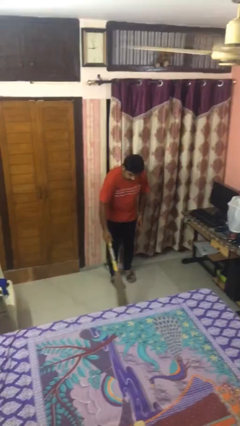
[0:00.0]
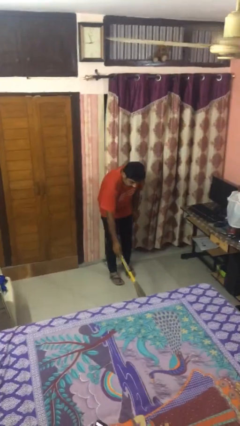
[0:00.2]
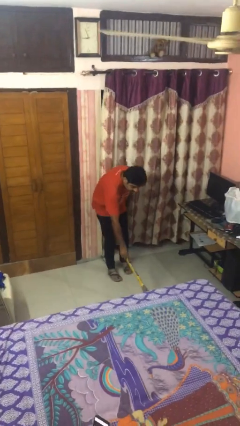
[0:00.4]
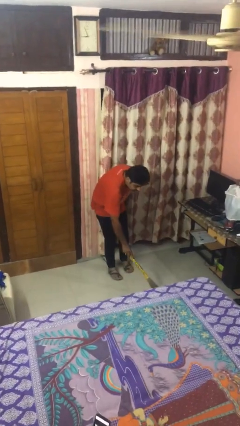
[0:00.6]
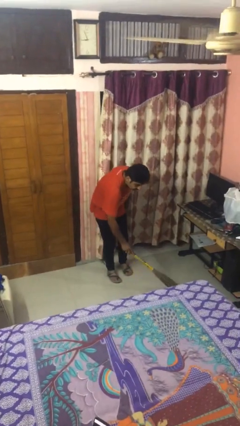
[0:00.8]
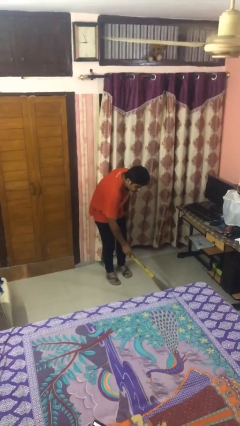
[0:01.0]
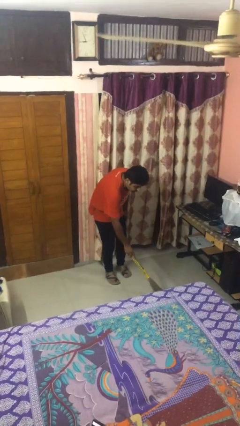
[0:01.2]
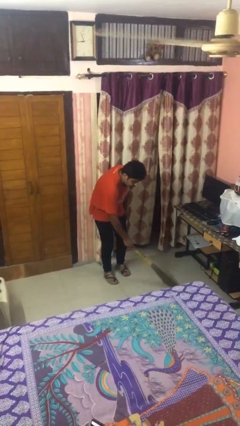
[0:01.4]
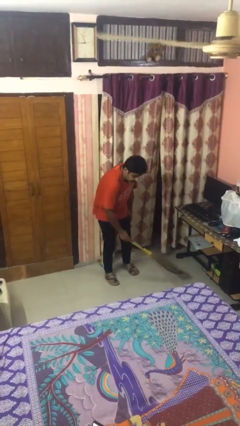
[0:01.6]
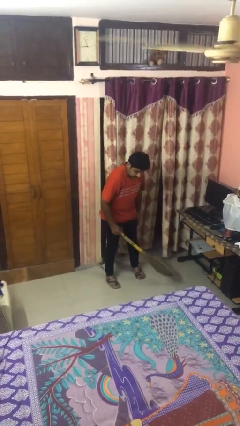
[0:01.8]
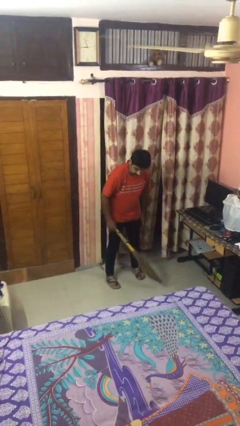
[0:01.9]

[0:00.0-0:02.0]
person sweeps floor

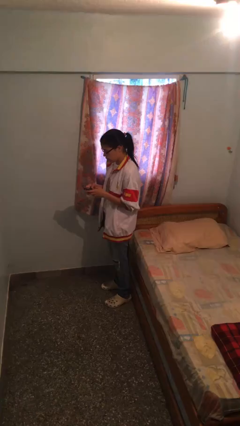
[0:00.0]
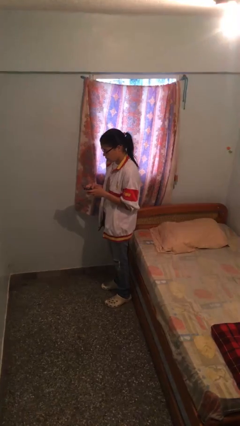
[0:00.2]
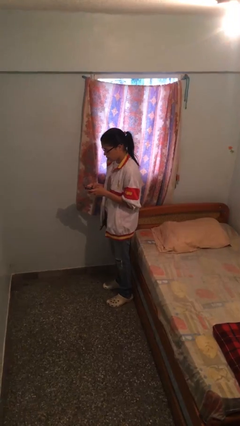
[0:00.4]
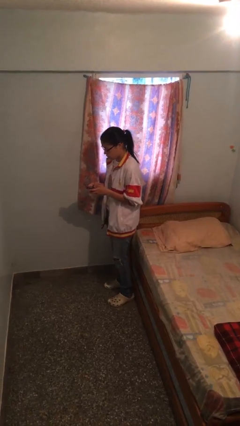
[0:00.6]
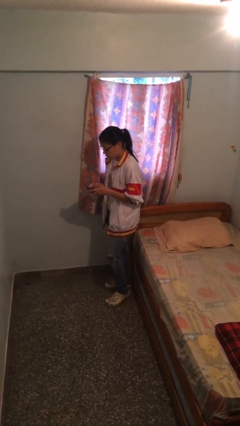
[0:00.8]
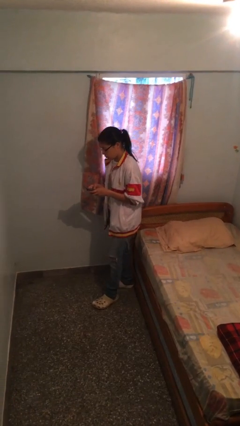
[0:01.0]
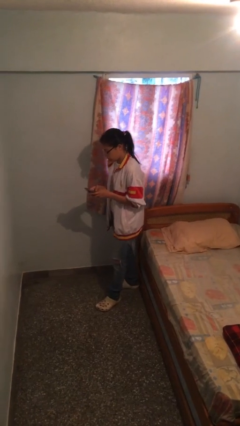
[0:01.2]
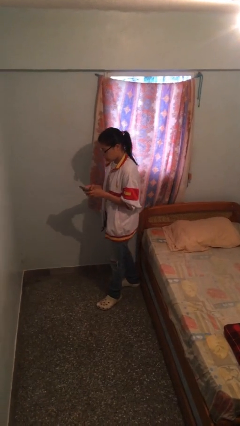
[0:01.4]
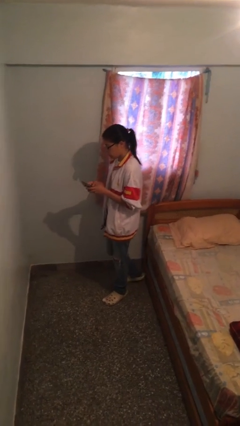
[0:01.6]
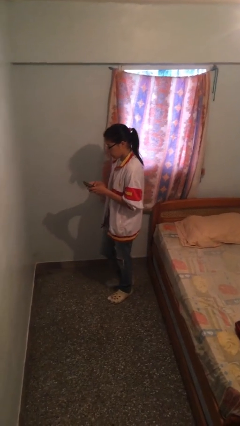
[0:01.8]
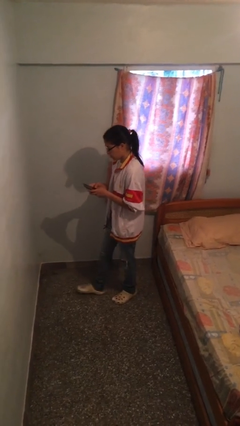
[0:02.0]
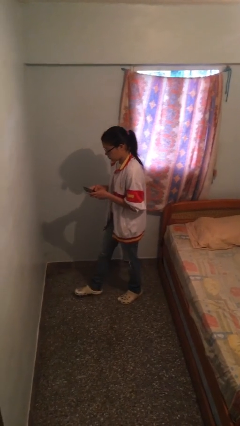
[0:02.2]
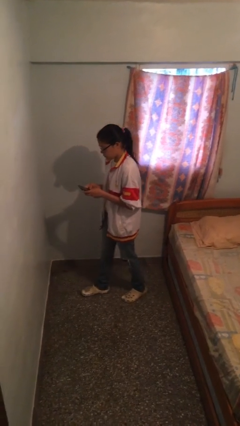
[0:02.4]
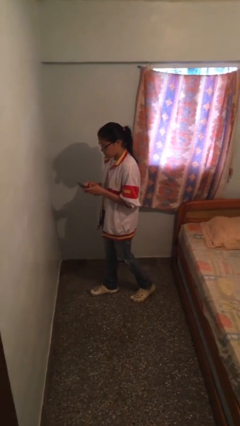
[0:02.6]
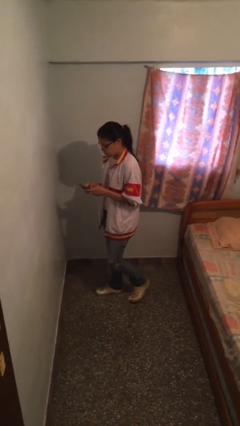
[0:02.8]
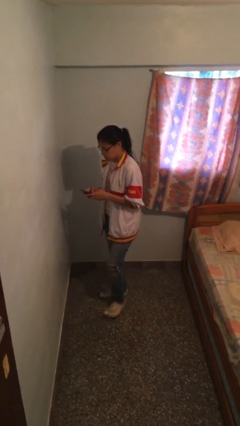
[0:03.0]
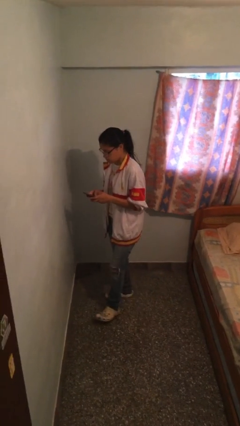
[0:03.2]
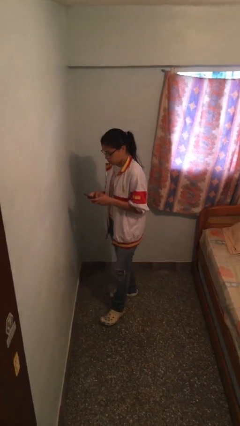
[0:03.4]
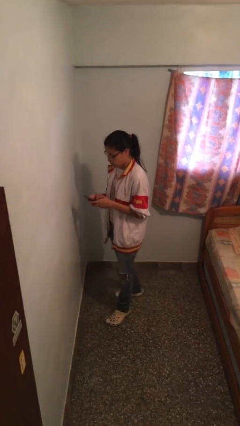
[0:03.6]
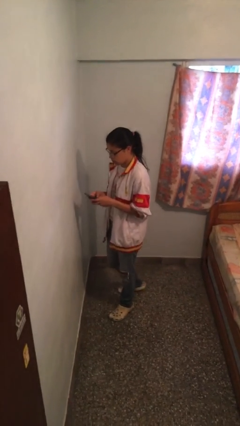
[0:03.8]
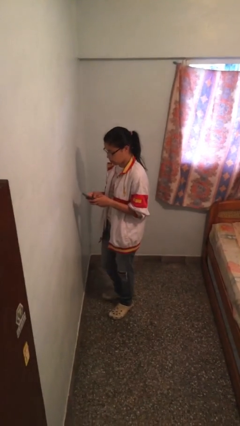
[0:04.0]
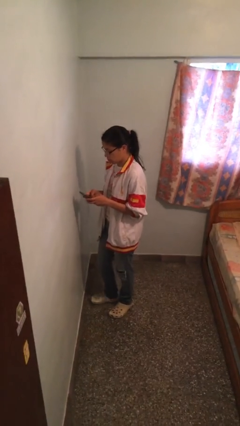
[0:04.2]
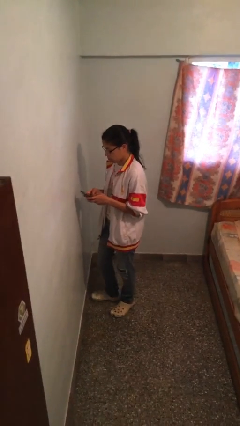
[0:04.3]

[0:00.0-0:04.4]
person texts on phone

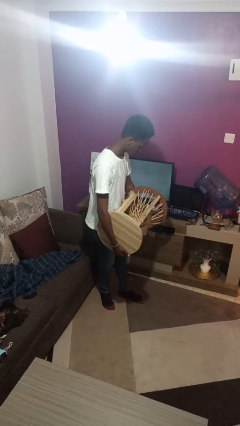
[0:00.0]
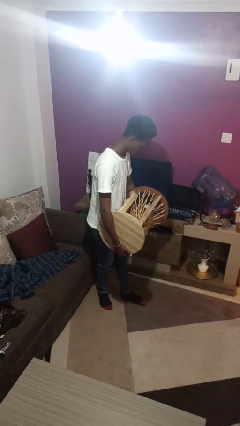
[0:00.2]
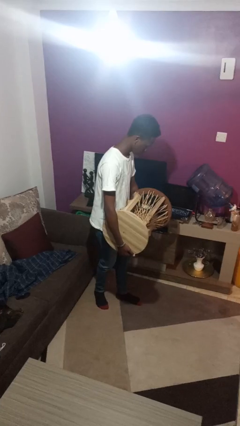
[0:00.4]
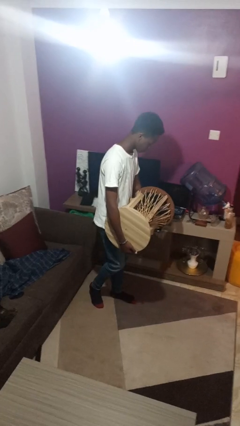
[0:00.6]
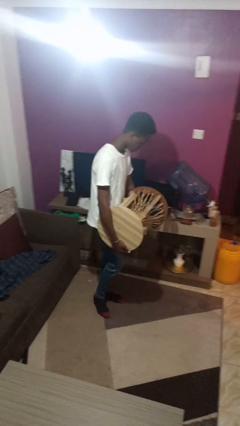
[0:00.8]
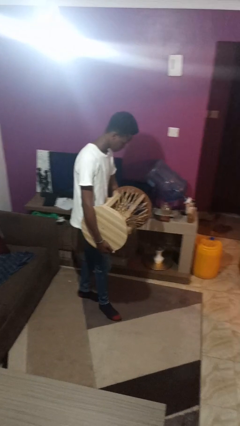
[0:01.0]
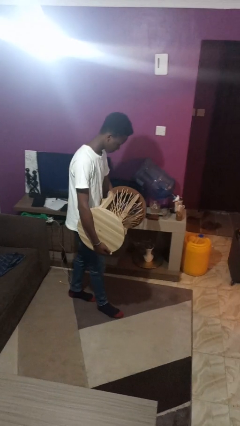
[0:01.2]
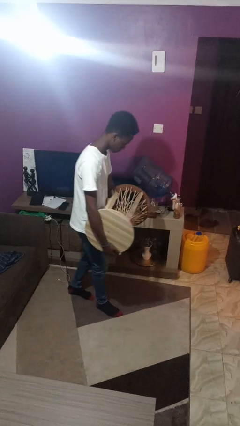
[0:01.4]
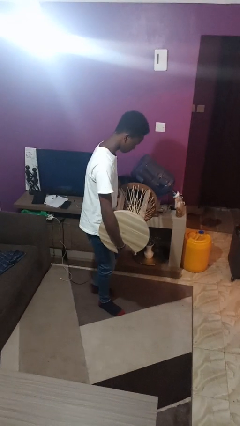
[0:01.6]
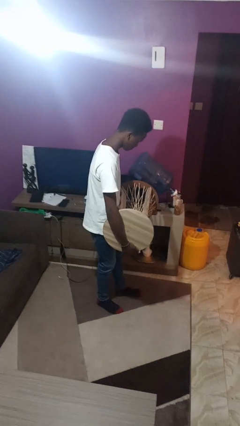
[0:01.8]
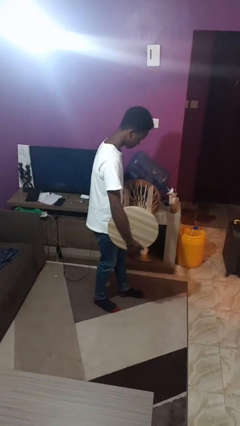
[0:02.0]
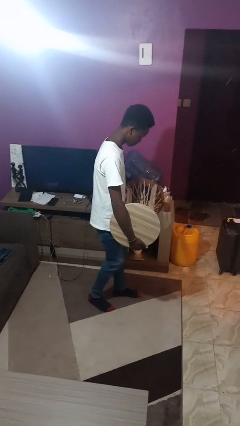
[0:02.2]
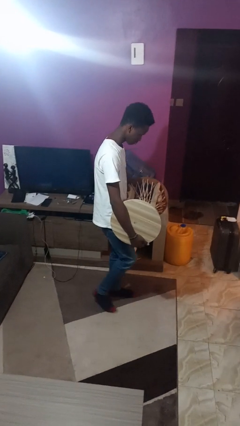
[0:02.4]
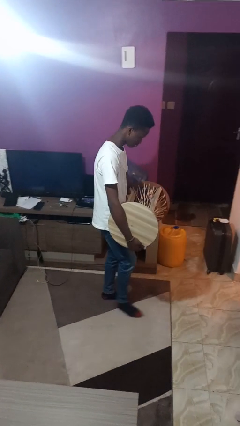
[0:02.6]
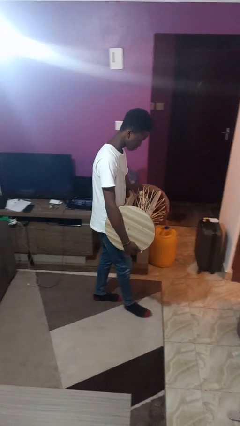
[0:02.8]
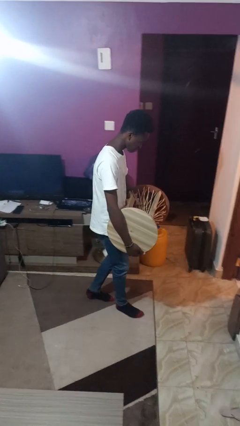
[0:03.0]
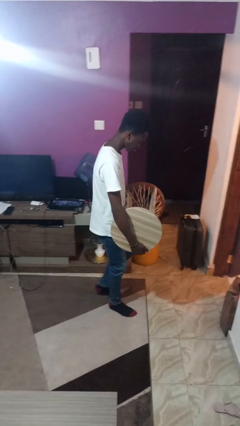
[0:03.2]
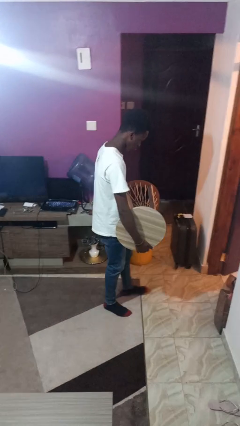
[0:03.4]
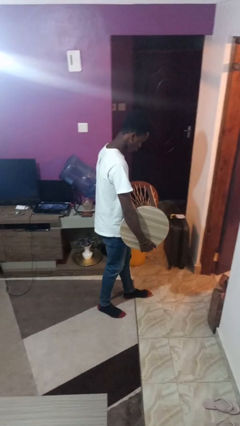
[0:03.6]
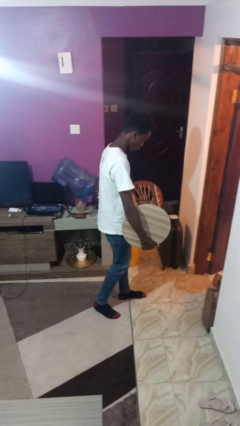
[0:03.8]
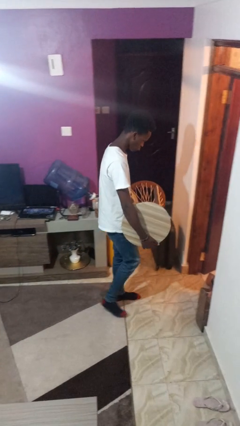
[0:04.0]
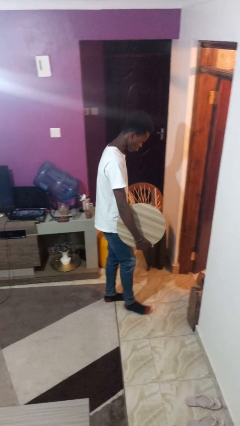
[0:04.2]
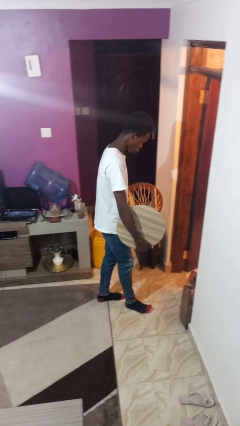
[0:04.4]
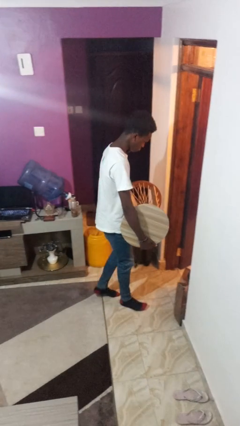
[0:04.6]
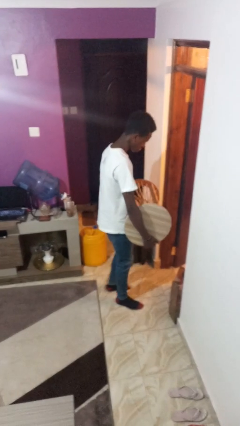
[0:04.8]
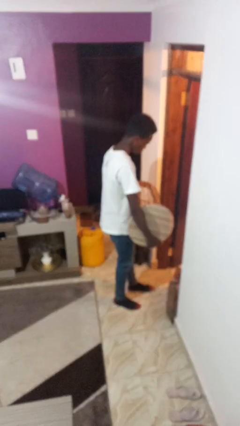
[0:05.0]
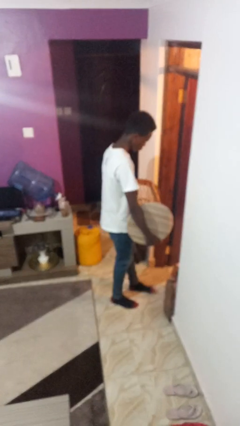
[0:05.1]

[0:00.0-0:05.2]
person carries furniture

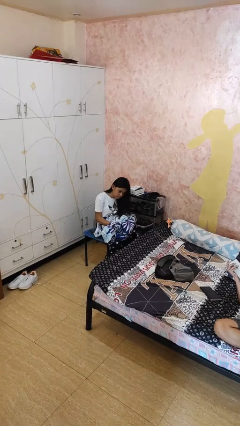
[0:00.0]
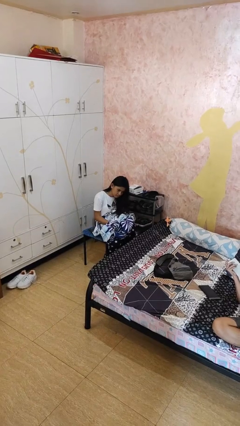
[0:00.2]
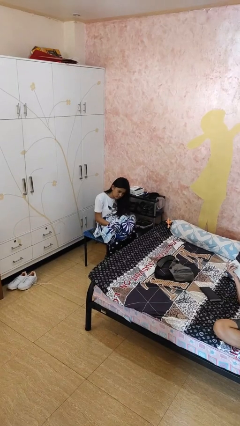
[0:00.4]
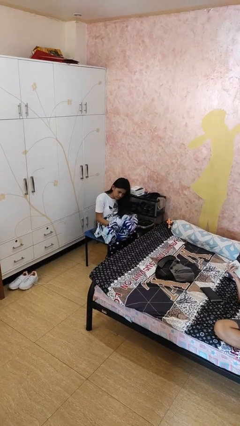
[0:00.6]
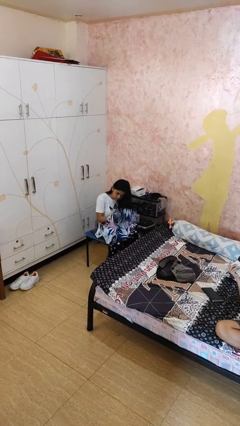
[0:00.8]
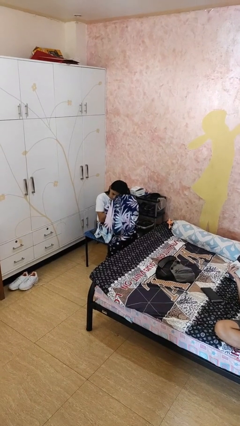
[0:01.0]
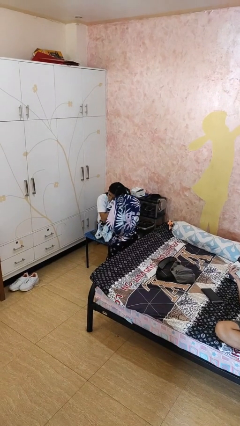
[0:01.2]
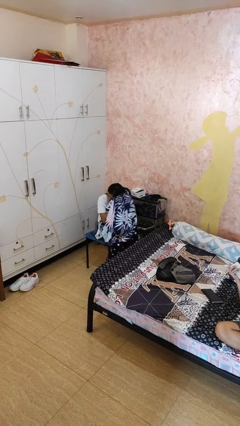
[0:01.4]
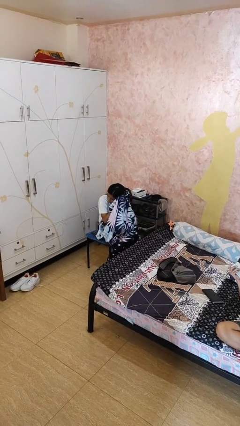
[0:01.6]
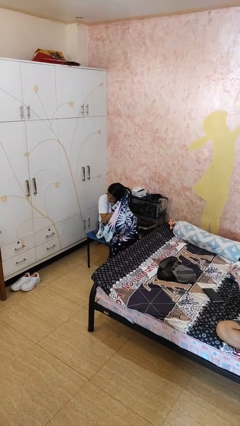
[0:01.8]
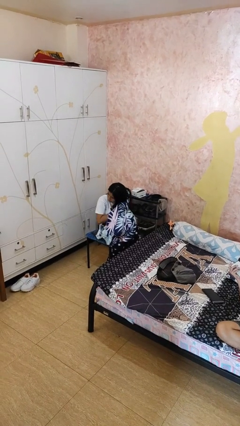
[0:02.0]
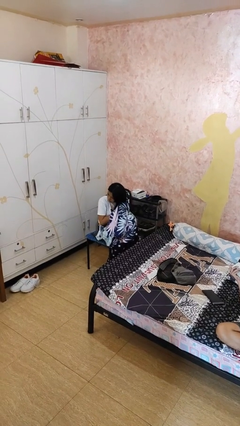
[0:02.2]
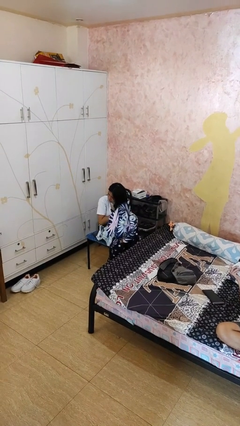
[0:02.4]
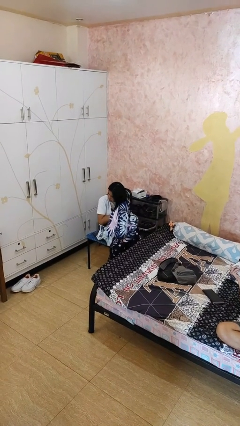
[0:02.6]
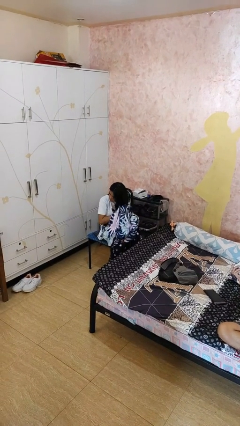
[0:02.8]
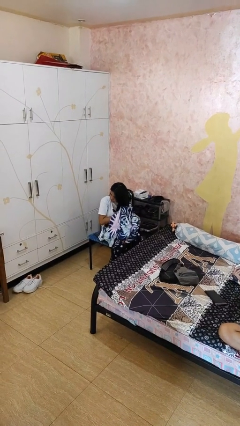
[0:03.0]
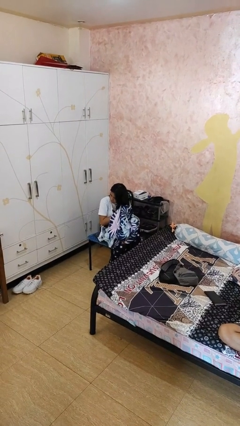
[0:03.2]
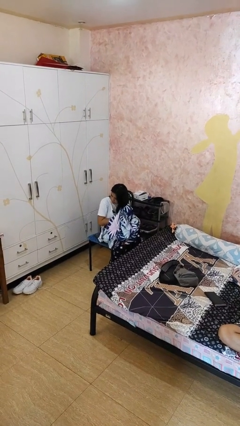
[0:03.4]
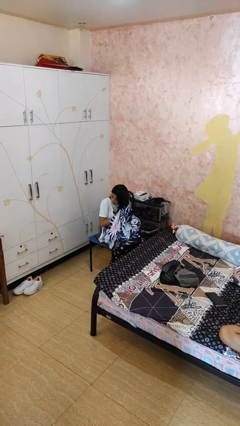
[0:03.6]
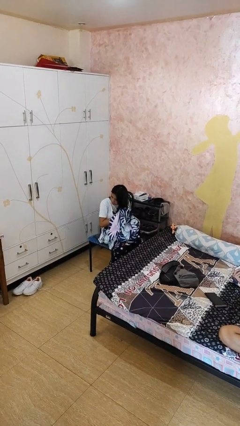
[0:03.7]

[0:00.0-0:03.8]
person dries hair with towel

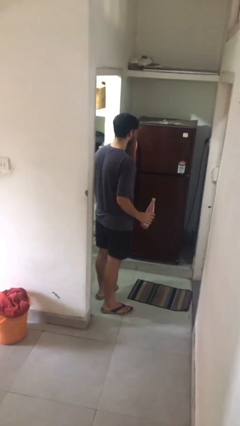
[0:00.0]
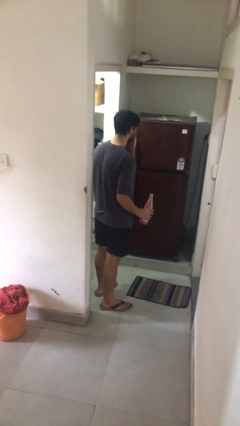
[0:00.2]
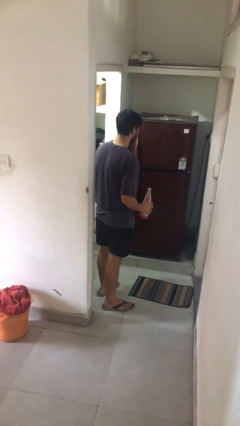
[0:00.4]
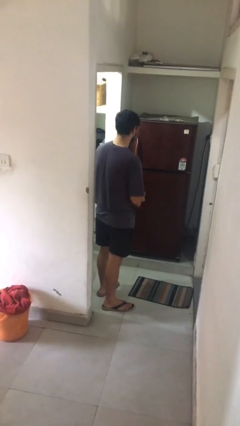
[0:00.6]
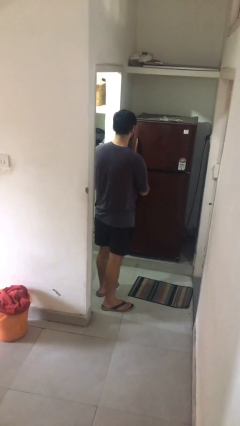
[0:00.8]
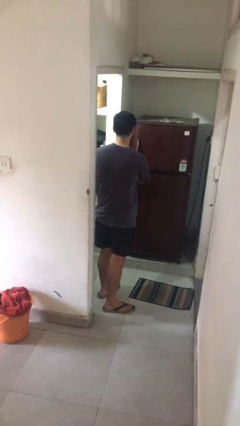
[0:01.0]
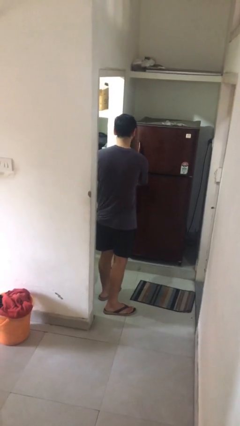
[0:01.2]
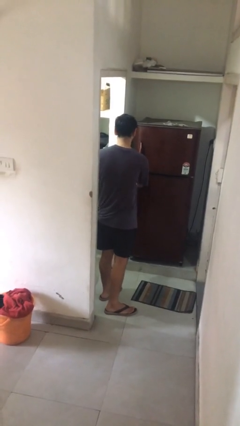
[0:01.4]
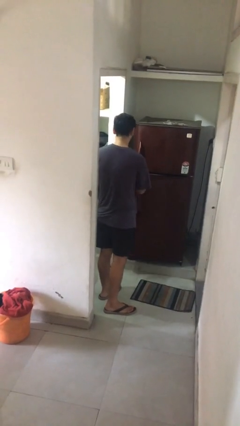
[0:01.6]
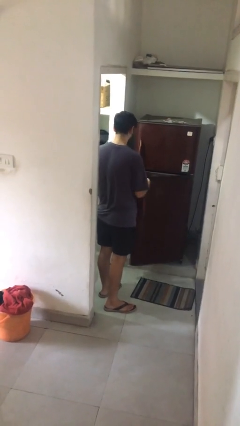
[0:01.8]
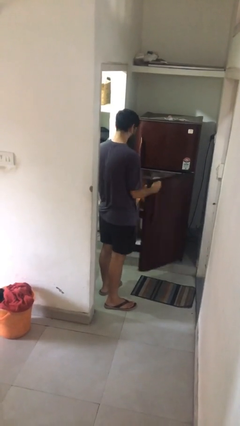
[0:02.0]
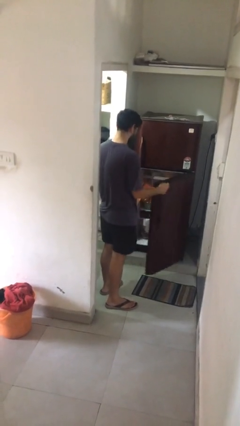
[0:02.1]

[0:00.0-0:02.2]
person opens refrigerator

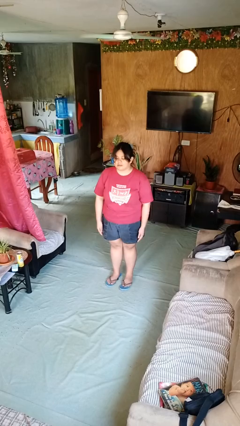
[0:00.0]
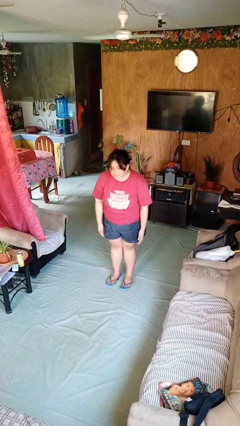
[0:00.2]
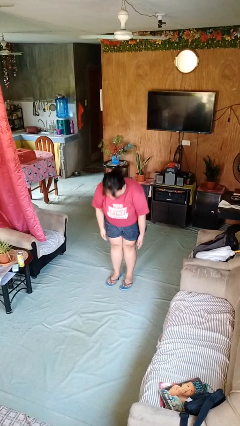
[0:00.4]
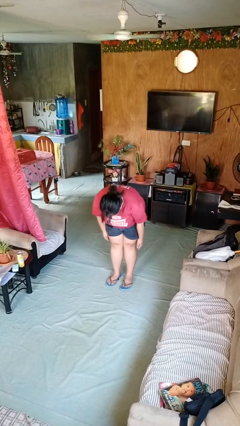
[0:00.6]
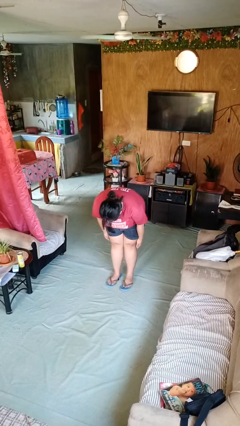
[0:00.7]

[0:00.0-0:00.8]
person bows
